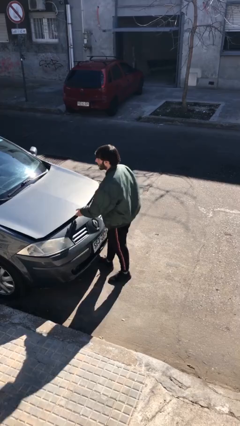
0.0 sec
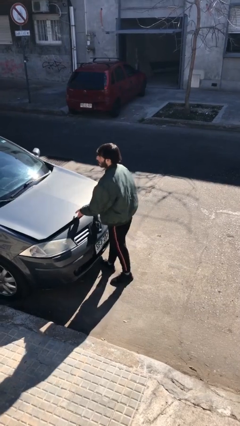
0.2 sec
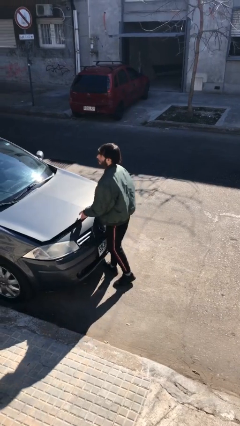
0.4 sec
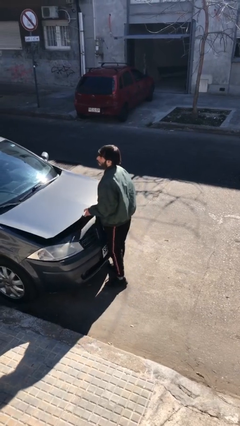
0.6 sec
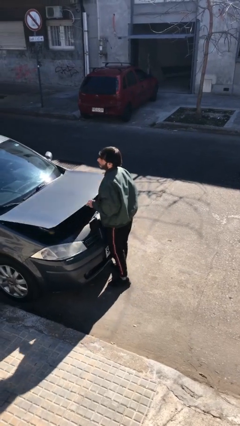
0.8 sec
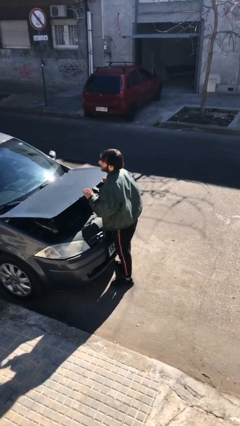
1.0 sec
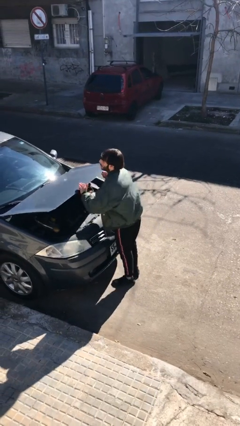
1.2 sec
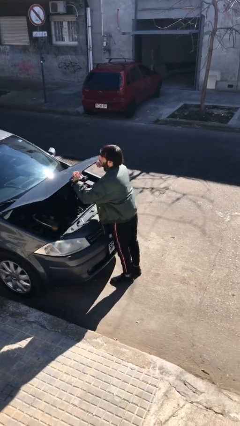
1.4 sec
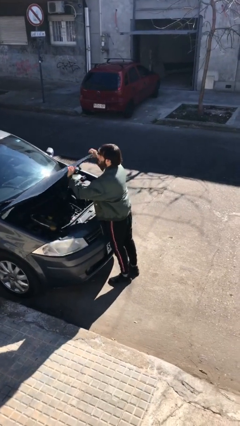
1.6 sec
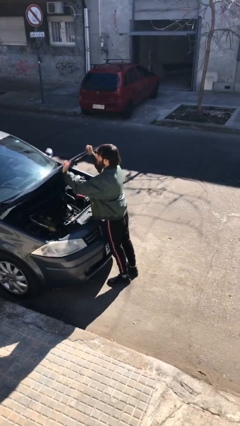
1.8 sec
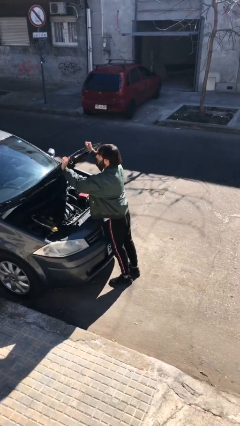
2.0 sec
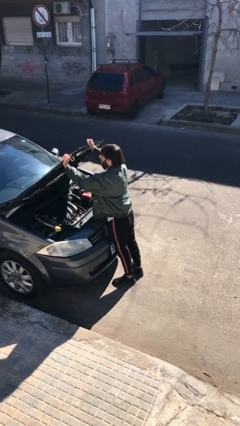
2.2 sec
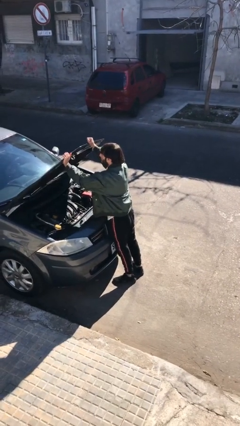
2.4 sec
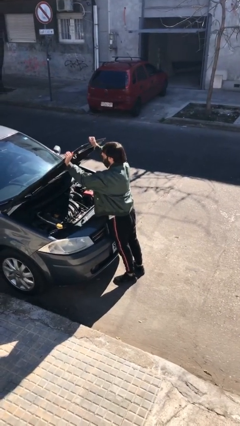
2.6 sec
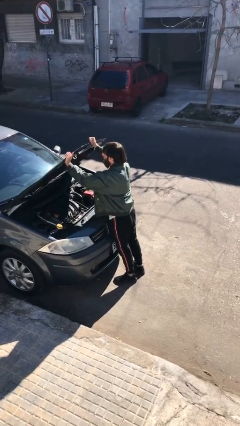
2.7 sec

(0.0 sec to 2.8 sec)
person opens car hood

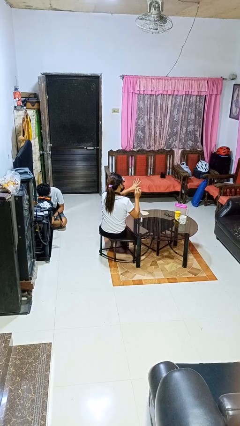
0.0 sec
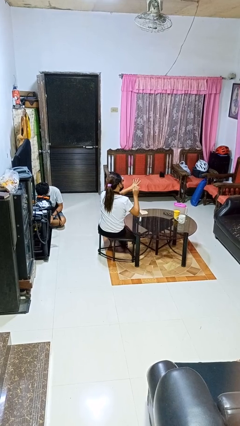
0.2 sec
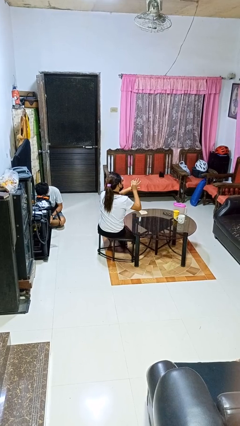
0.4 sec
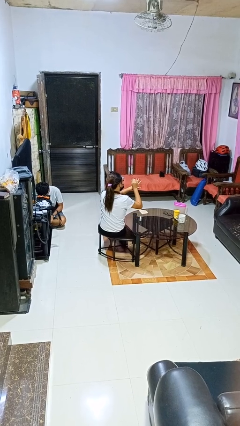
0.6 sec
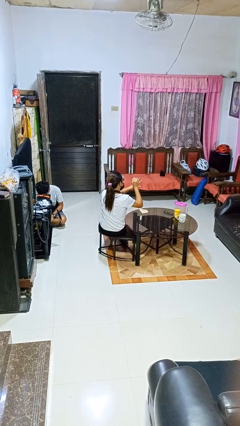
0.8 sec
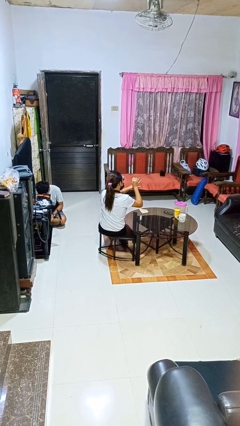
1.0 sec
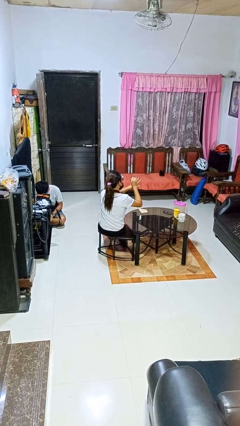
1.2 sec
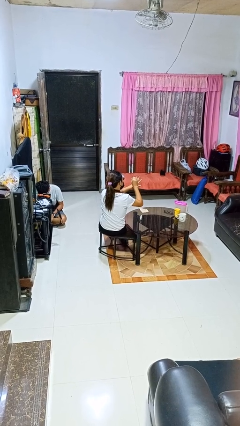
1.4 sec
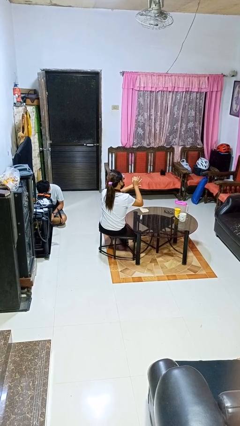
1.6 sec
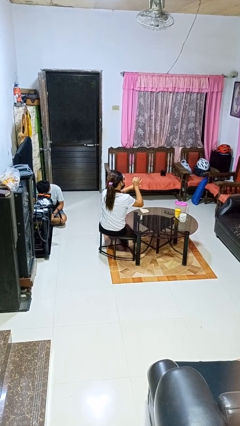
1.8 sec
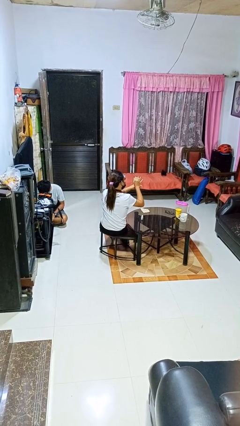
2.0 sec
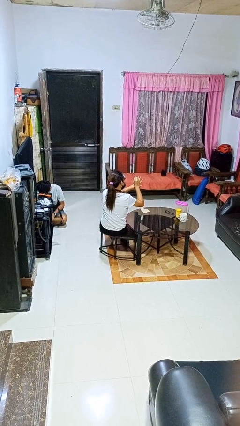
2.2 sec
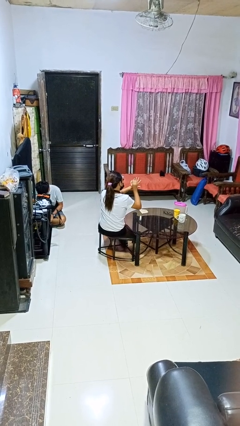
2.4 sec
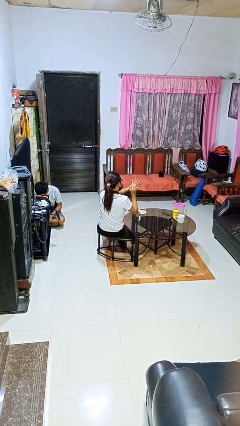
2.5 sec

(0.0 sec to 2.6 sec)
person paints fingernails

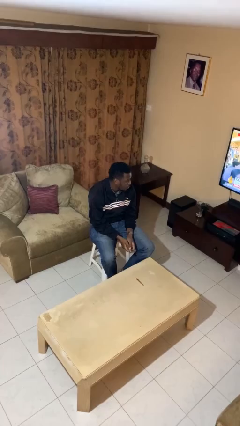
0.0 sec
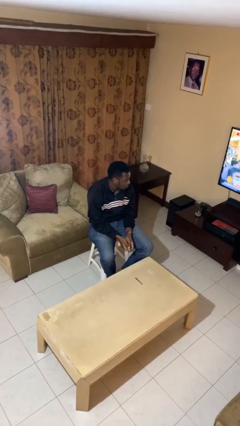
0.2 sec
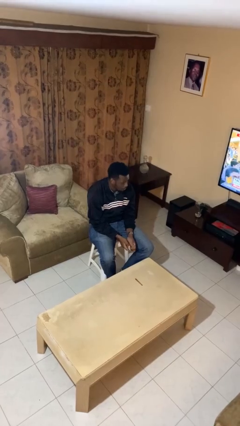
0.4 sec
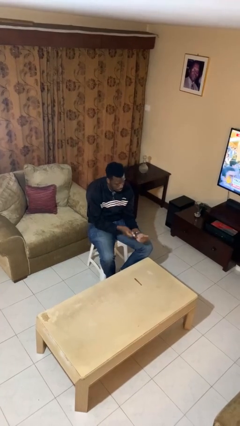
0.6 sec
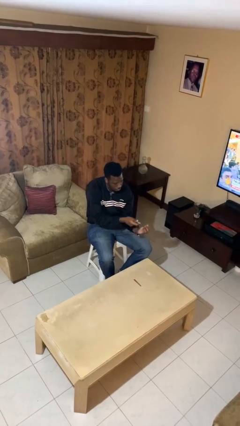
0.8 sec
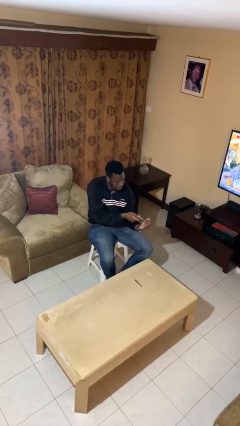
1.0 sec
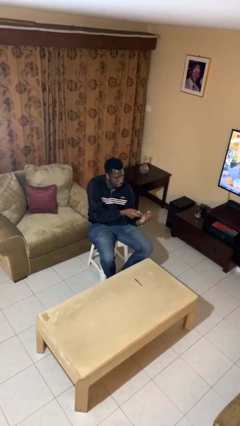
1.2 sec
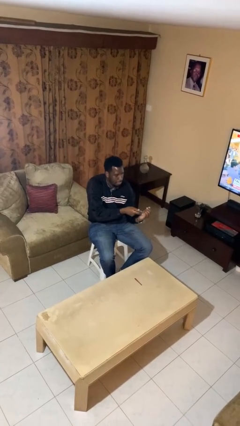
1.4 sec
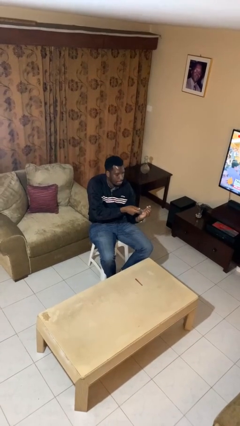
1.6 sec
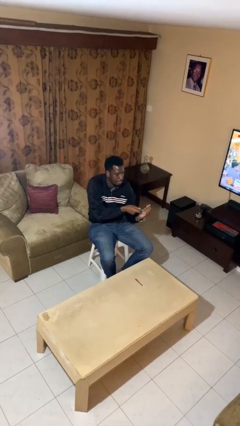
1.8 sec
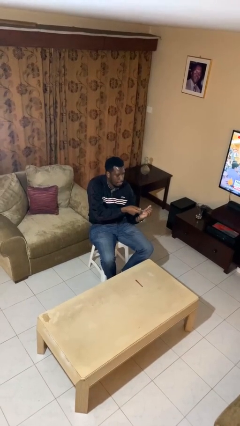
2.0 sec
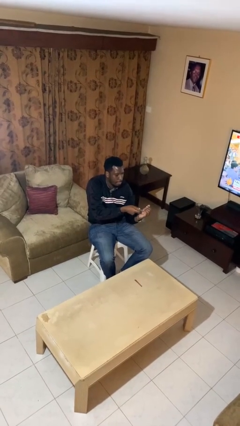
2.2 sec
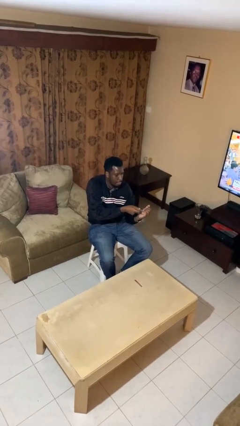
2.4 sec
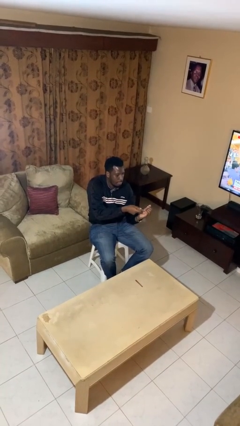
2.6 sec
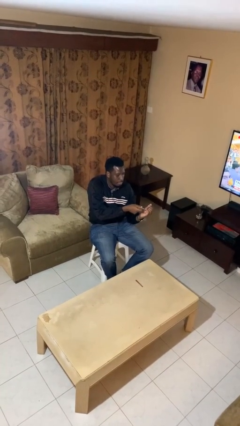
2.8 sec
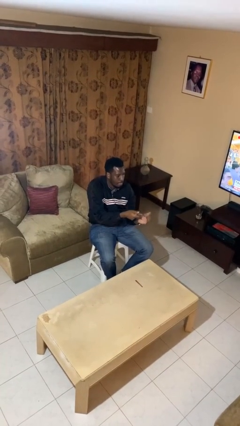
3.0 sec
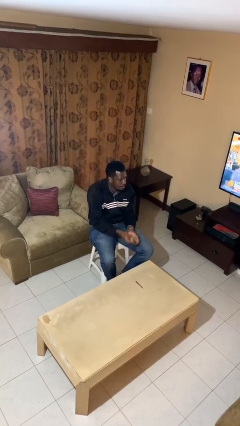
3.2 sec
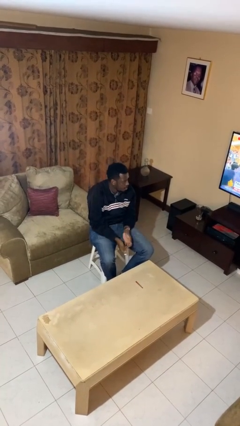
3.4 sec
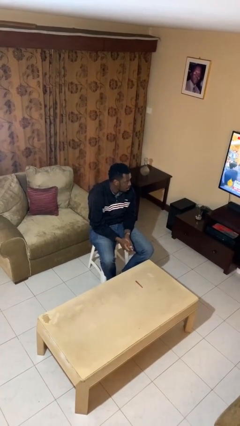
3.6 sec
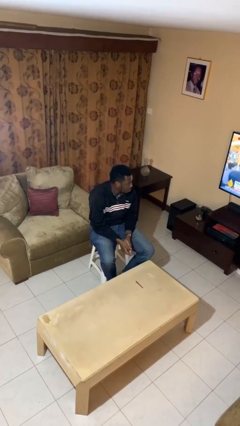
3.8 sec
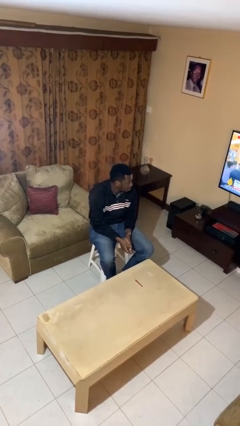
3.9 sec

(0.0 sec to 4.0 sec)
person clips fingernails

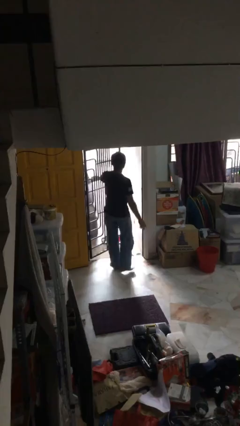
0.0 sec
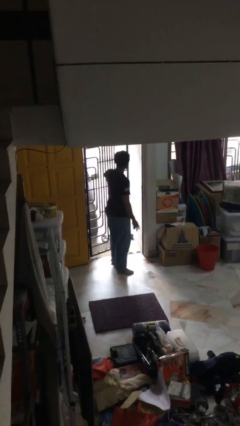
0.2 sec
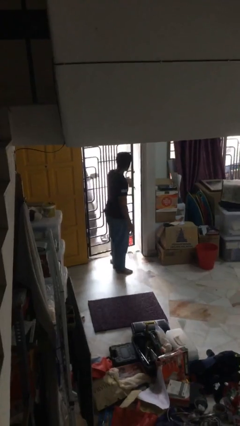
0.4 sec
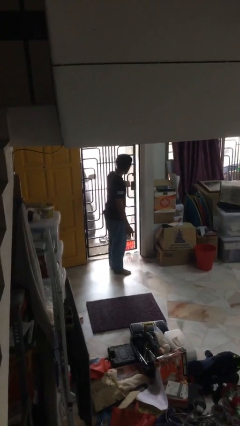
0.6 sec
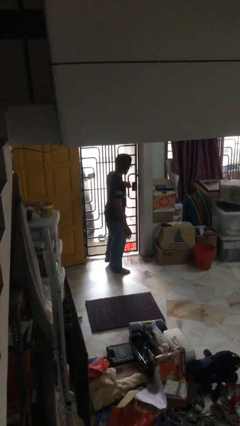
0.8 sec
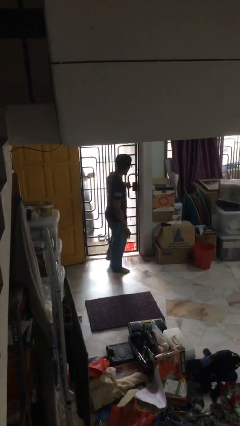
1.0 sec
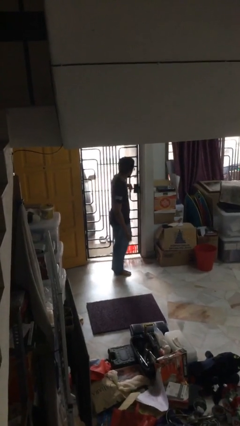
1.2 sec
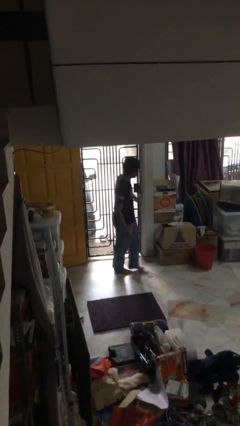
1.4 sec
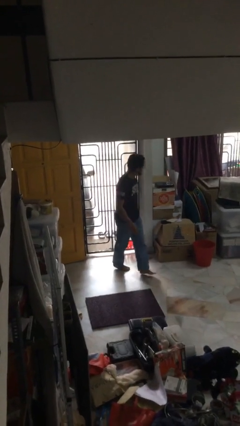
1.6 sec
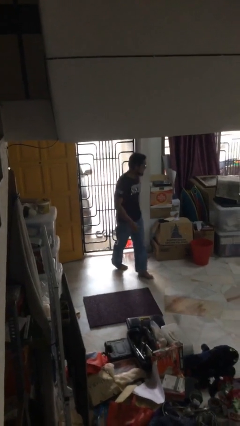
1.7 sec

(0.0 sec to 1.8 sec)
person closes facility door

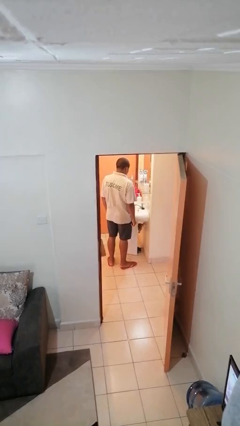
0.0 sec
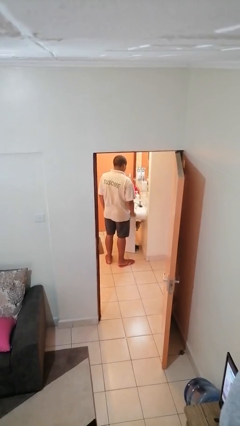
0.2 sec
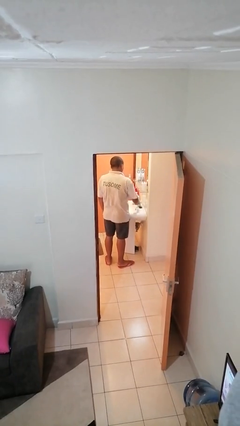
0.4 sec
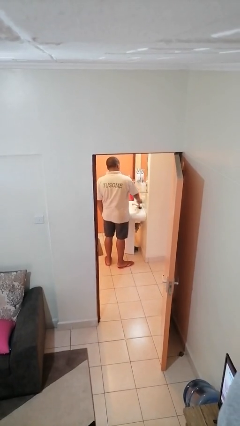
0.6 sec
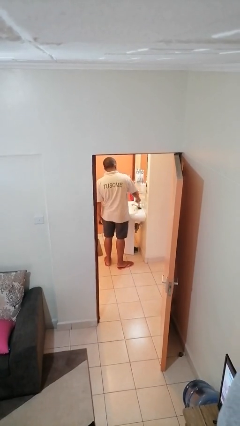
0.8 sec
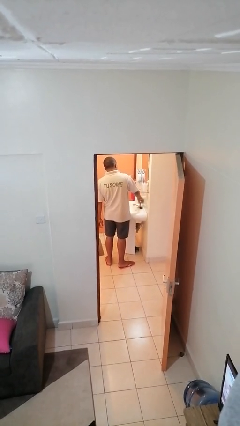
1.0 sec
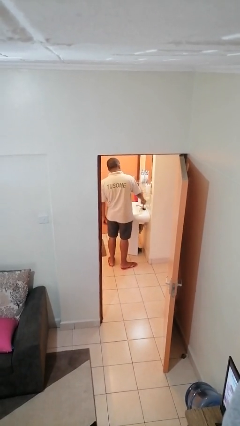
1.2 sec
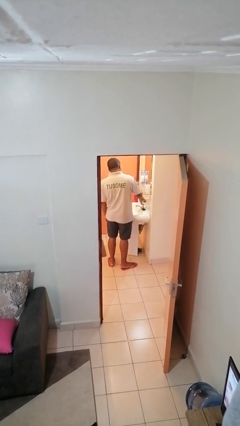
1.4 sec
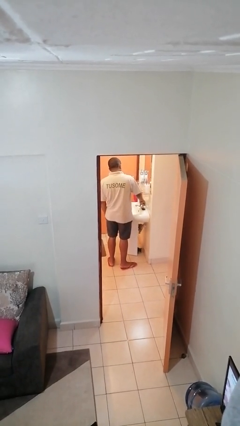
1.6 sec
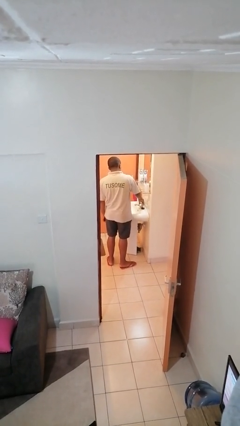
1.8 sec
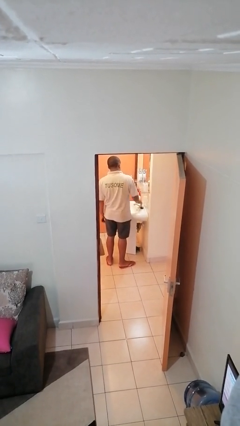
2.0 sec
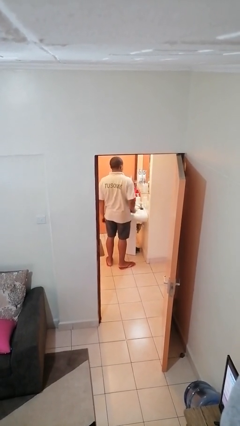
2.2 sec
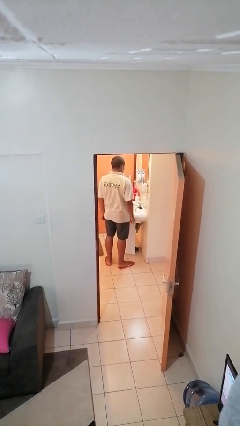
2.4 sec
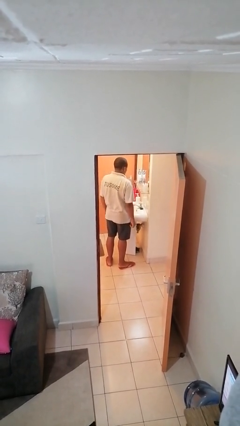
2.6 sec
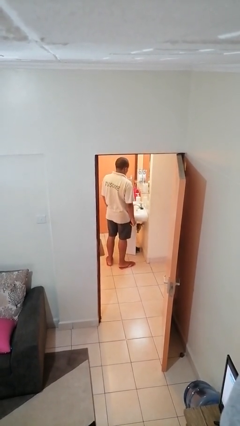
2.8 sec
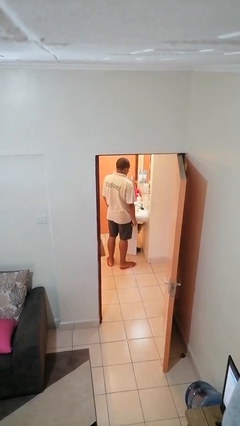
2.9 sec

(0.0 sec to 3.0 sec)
person turns off faucet

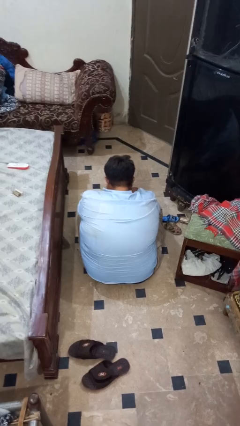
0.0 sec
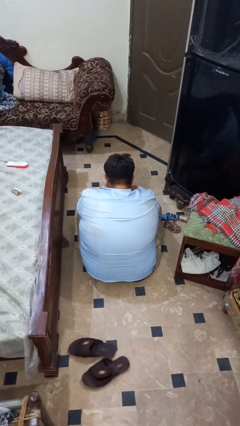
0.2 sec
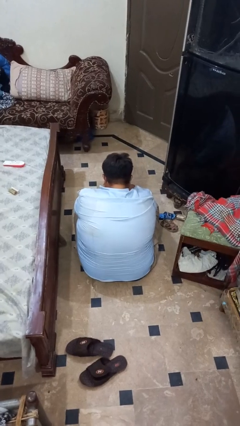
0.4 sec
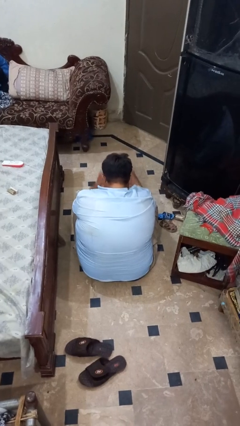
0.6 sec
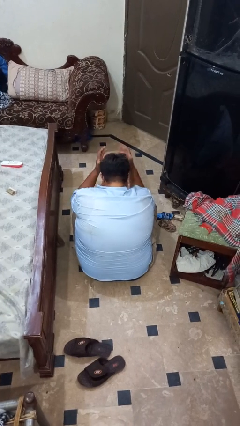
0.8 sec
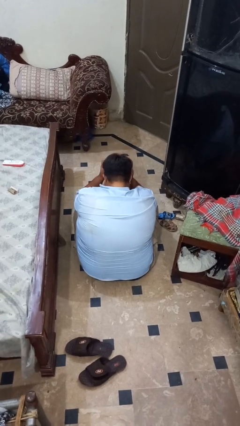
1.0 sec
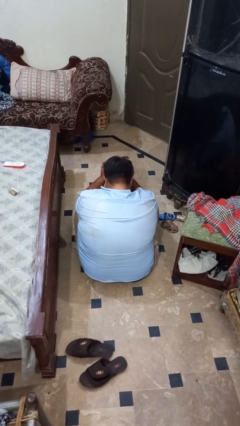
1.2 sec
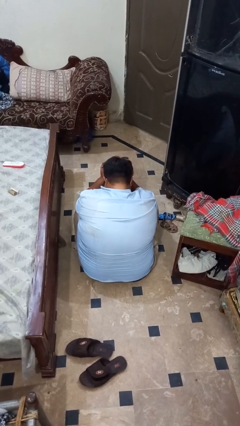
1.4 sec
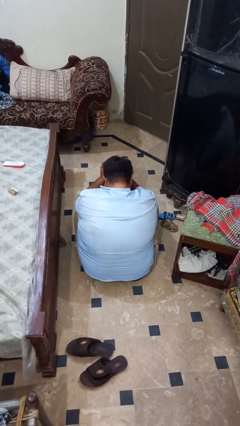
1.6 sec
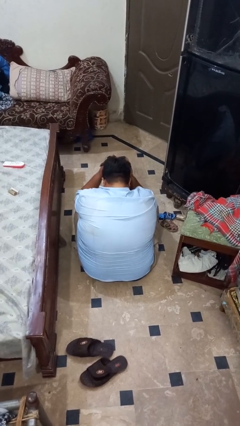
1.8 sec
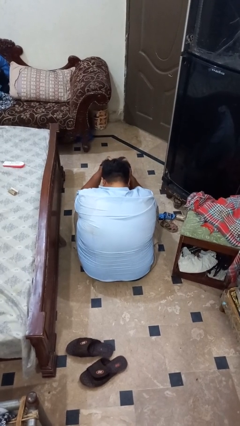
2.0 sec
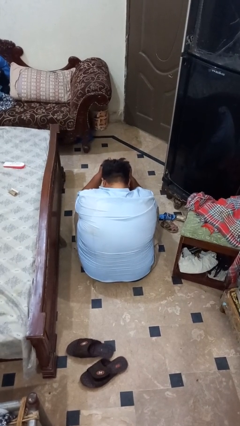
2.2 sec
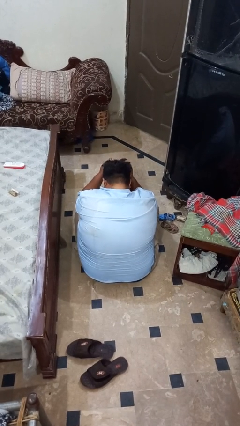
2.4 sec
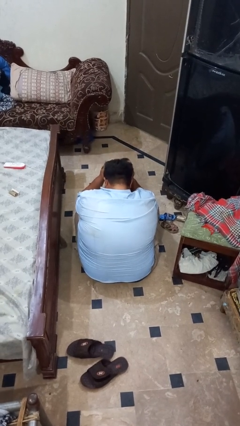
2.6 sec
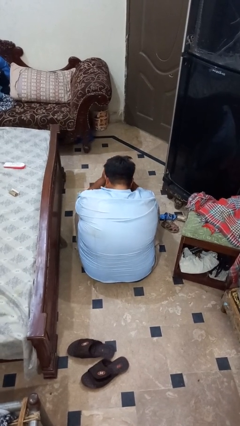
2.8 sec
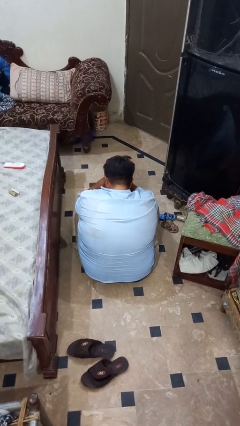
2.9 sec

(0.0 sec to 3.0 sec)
person strokes hair

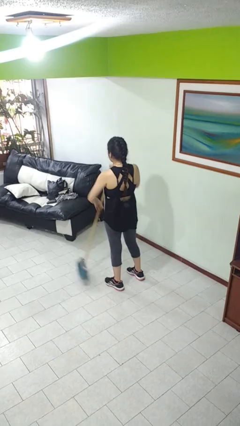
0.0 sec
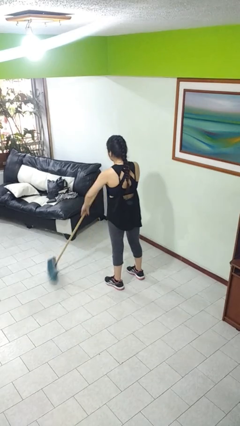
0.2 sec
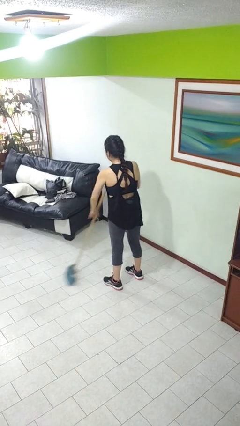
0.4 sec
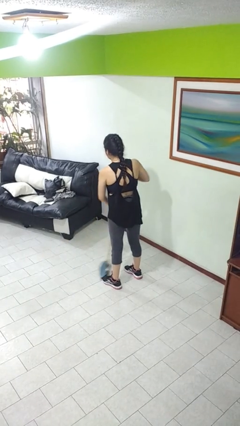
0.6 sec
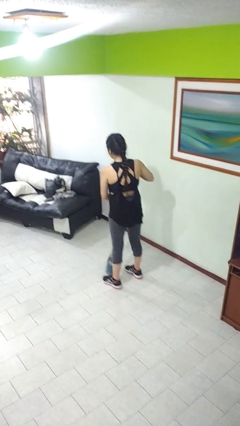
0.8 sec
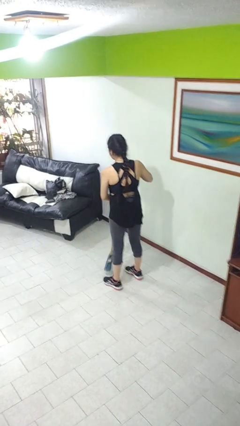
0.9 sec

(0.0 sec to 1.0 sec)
person sweeps floor
